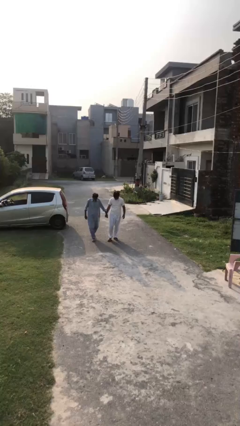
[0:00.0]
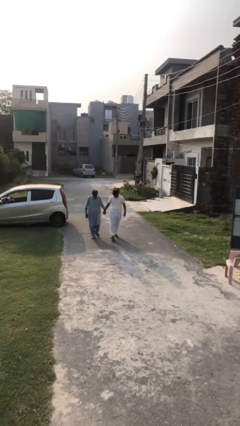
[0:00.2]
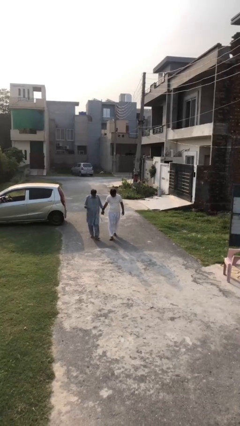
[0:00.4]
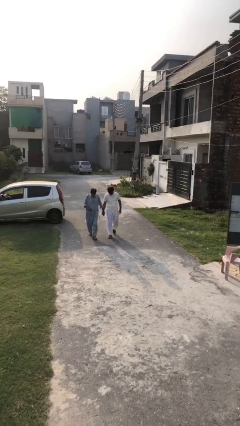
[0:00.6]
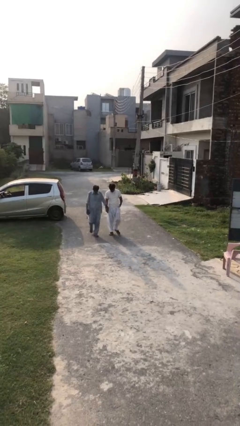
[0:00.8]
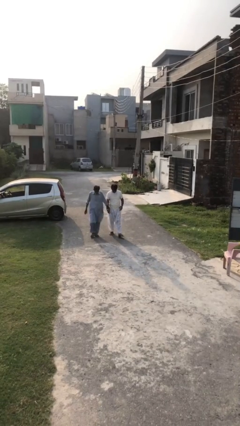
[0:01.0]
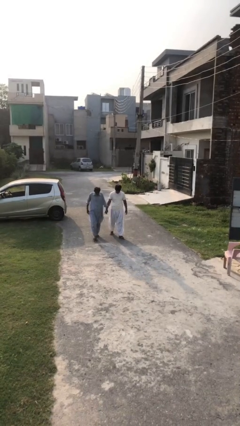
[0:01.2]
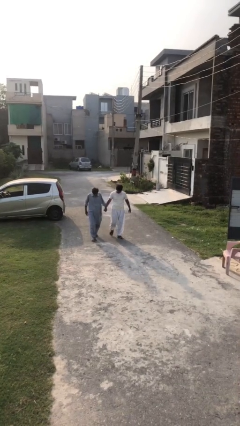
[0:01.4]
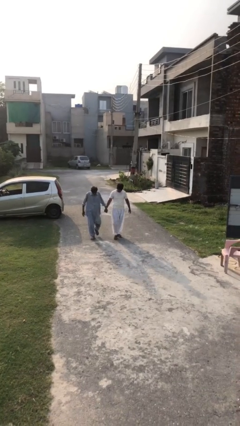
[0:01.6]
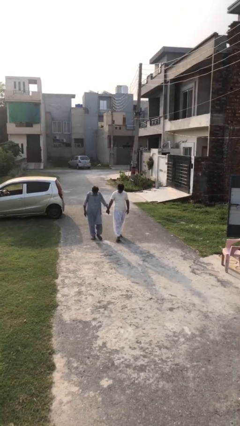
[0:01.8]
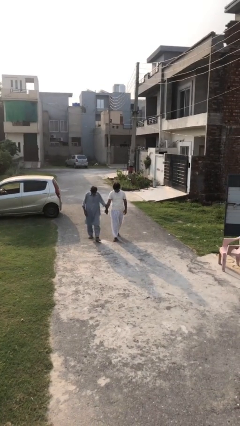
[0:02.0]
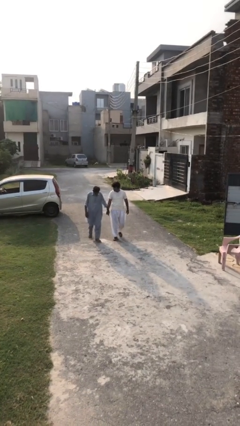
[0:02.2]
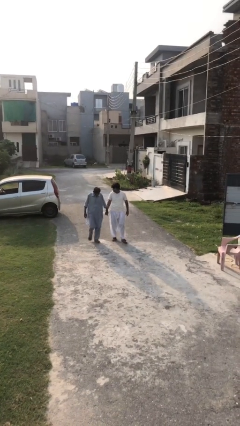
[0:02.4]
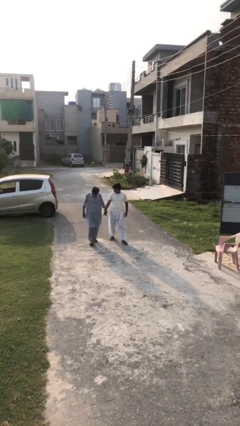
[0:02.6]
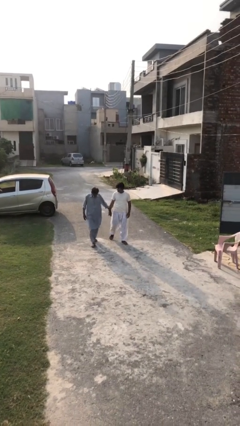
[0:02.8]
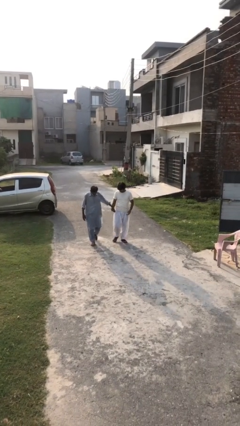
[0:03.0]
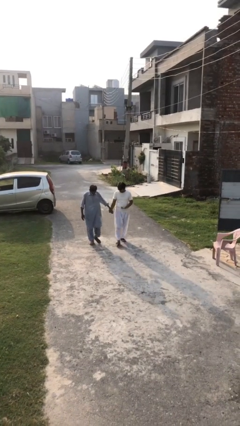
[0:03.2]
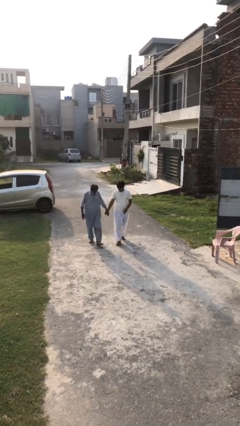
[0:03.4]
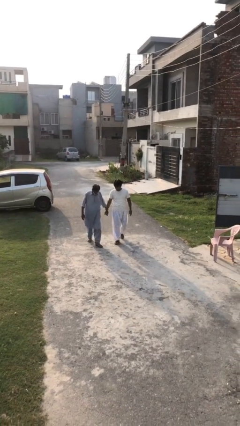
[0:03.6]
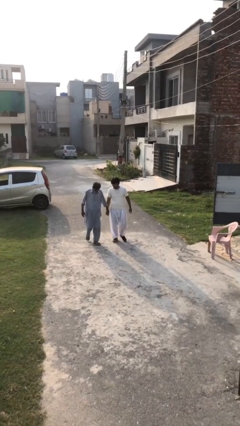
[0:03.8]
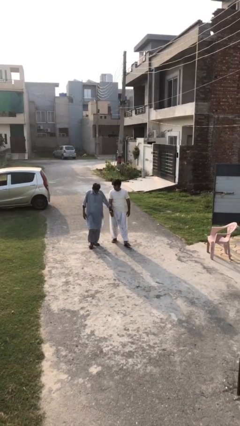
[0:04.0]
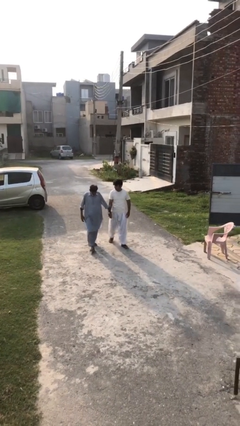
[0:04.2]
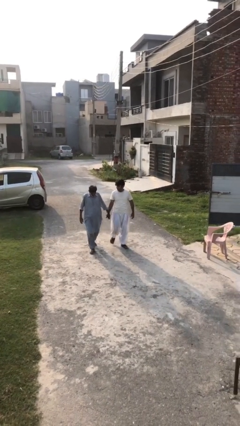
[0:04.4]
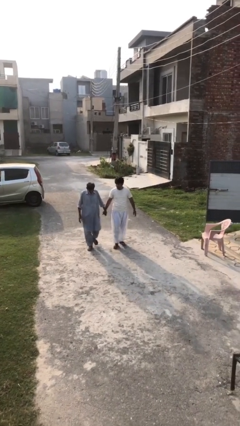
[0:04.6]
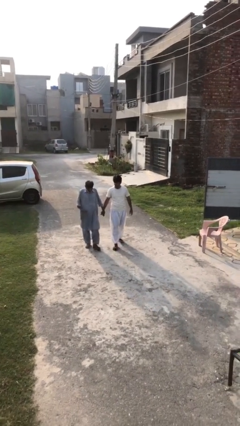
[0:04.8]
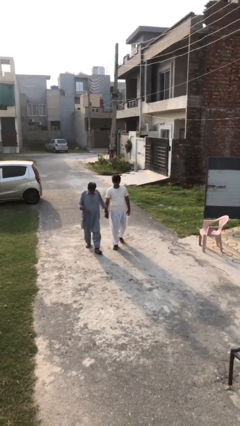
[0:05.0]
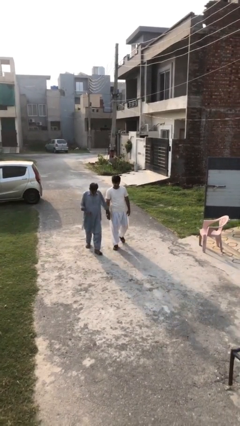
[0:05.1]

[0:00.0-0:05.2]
person holds hand

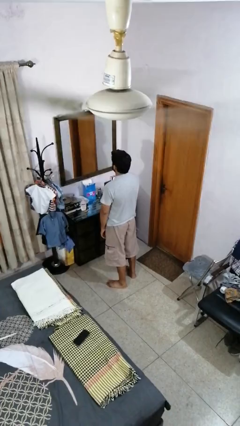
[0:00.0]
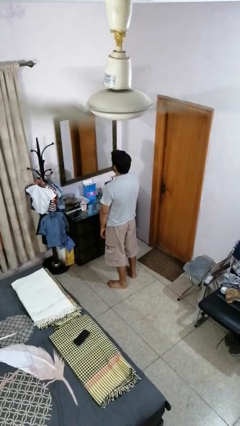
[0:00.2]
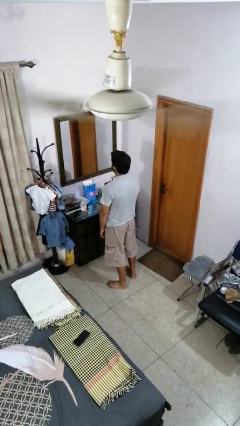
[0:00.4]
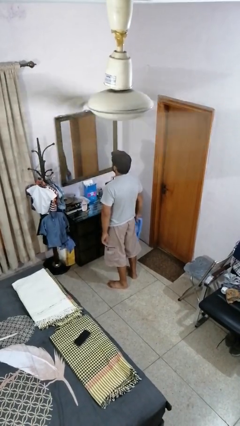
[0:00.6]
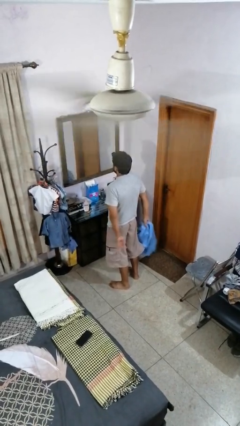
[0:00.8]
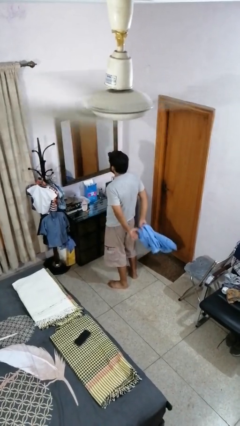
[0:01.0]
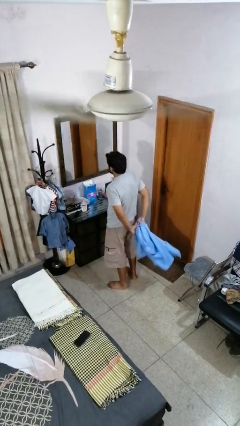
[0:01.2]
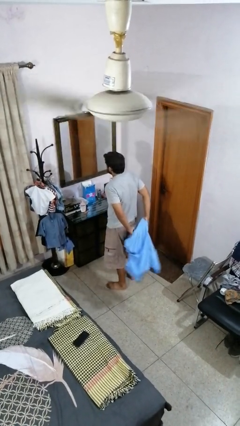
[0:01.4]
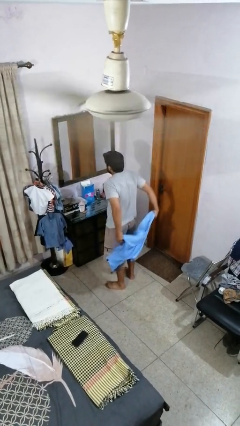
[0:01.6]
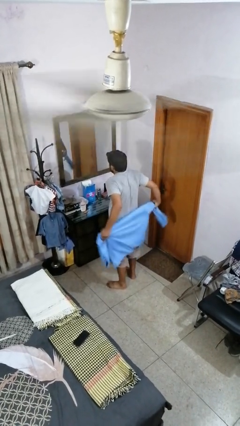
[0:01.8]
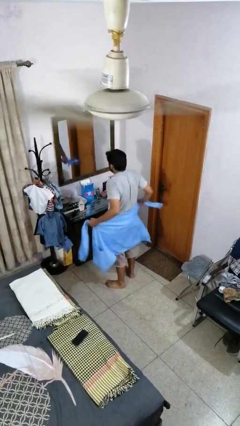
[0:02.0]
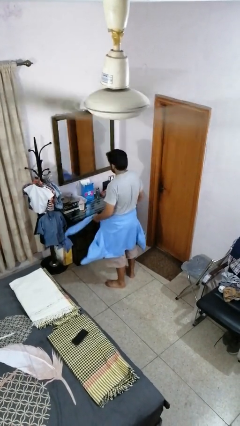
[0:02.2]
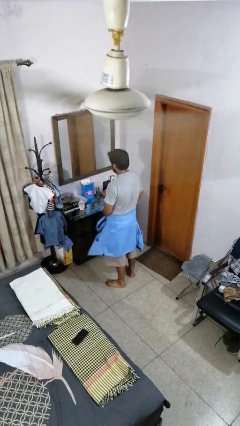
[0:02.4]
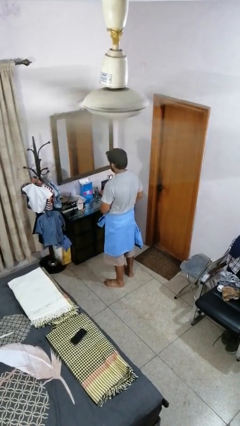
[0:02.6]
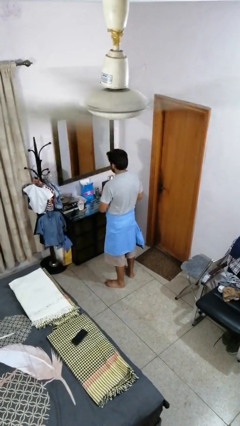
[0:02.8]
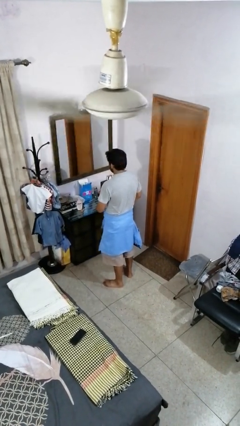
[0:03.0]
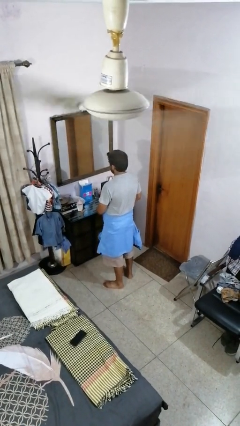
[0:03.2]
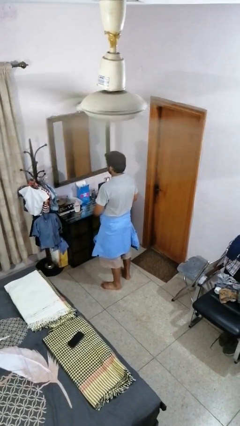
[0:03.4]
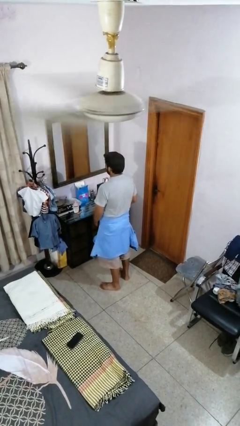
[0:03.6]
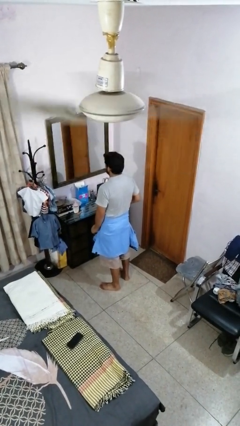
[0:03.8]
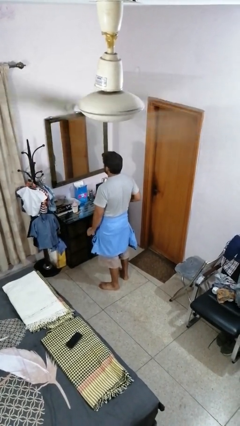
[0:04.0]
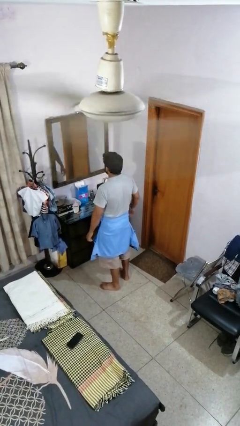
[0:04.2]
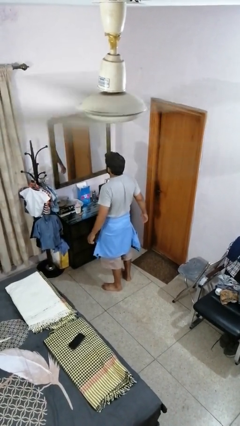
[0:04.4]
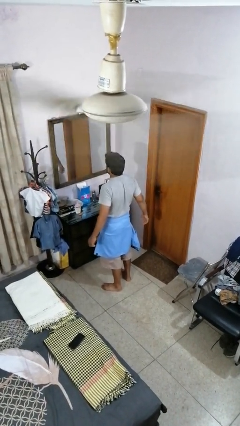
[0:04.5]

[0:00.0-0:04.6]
person ties jacket around waist

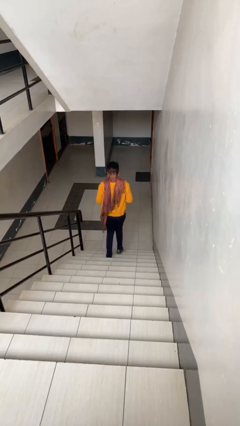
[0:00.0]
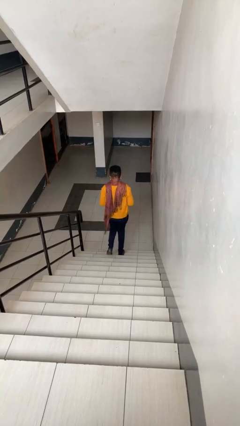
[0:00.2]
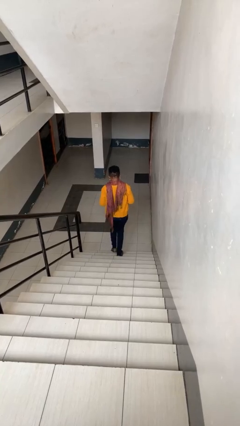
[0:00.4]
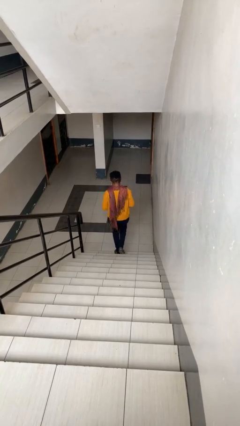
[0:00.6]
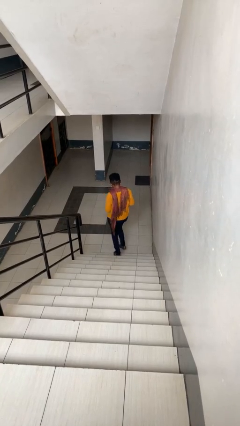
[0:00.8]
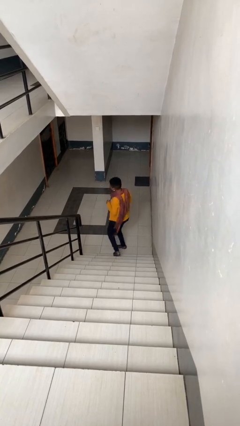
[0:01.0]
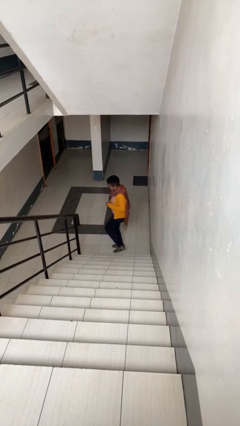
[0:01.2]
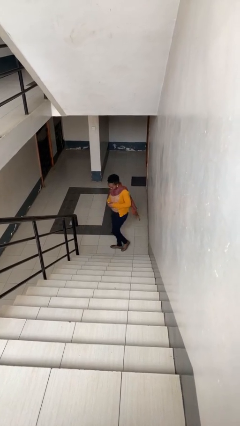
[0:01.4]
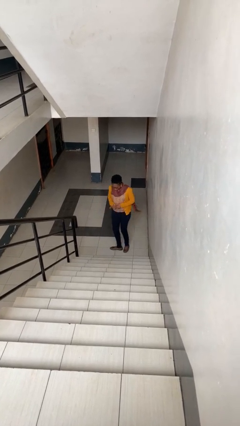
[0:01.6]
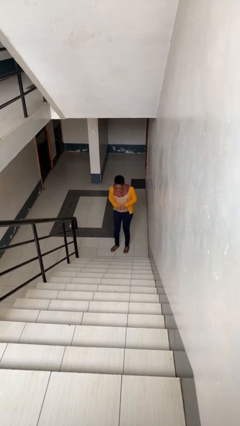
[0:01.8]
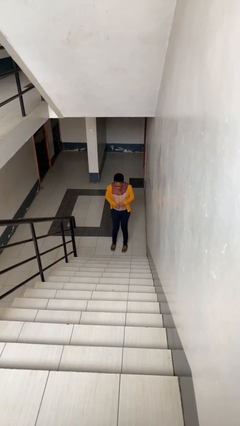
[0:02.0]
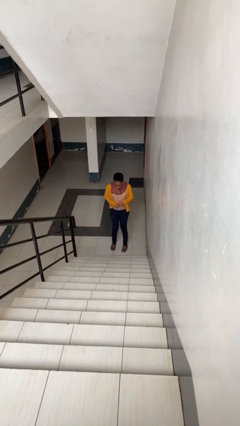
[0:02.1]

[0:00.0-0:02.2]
person climbs down stairs

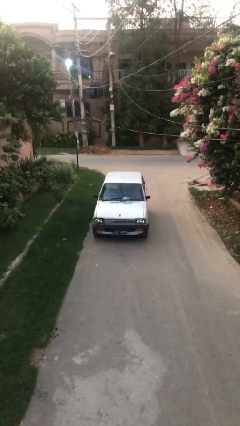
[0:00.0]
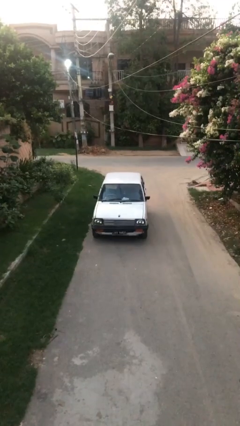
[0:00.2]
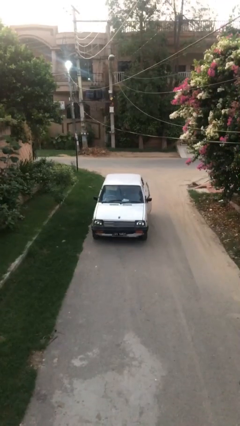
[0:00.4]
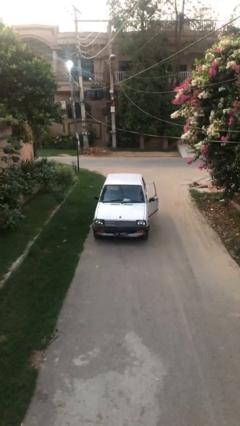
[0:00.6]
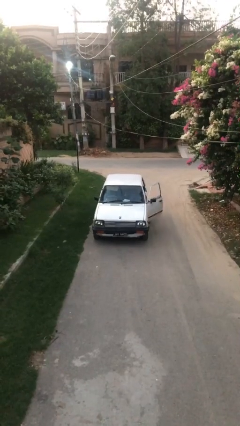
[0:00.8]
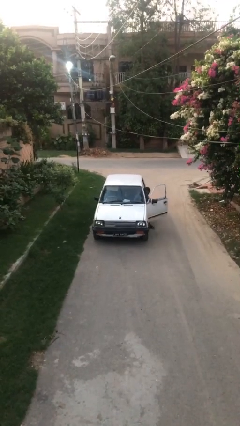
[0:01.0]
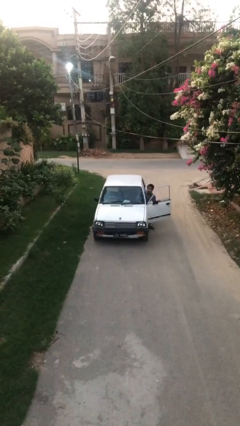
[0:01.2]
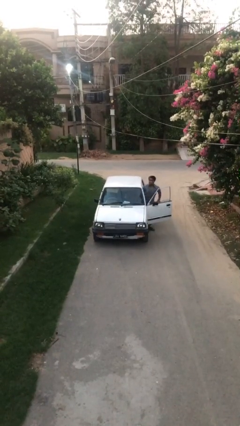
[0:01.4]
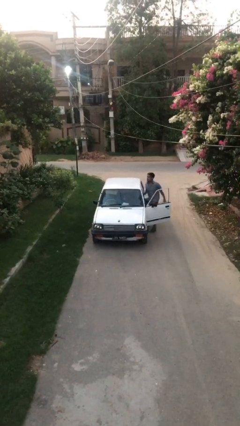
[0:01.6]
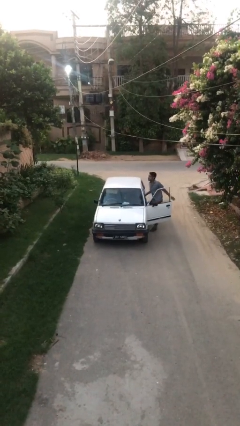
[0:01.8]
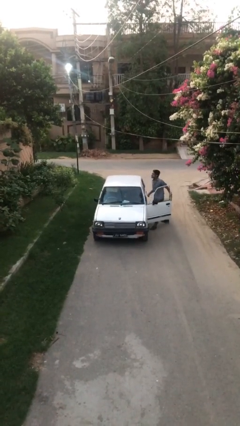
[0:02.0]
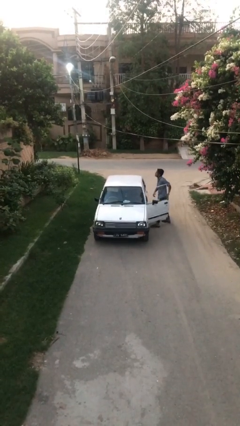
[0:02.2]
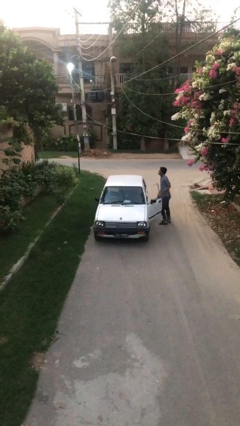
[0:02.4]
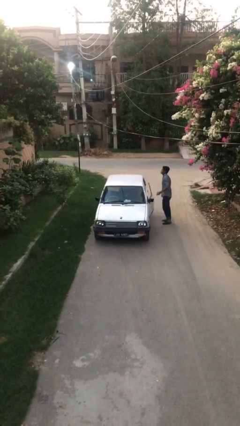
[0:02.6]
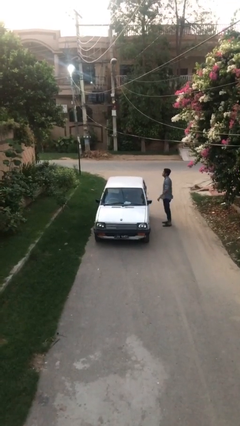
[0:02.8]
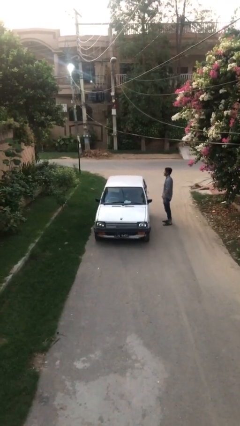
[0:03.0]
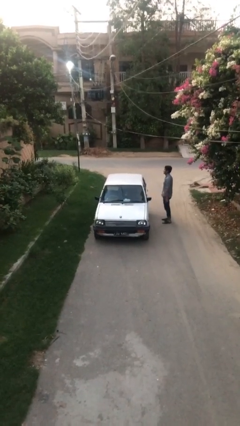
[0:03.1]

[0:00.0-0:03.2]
car drops off person

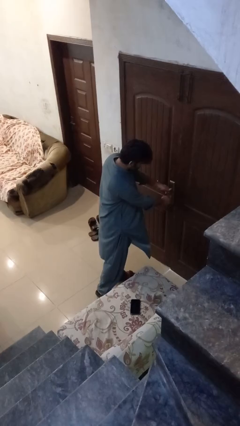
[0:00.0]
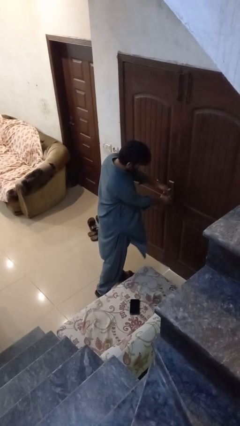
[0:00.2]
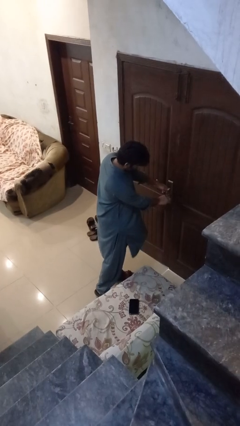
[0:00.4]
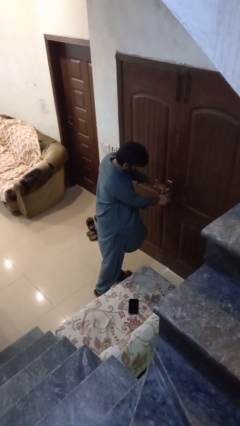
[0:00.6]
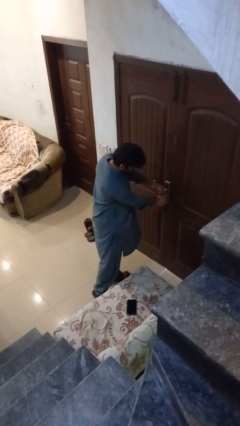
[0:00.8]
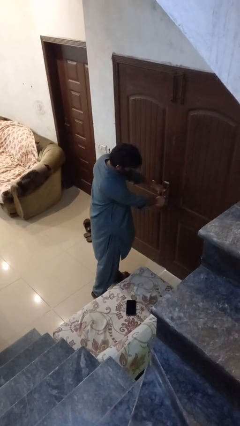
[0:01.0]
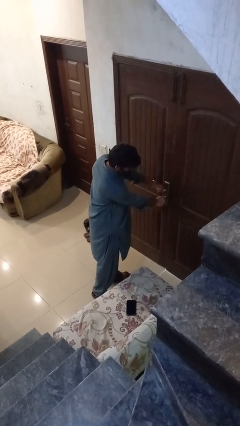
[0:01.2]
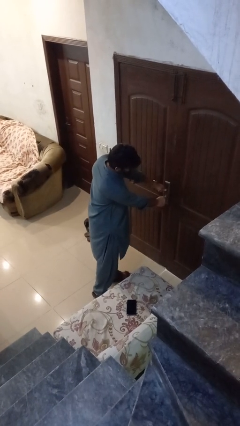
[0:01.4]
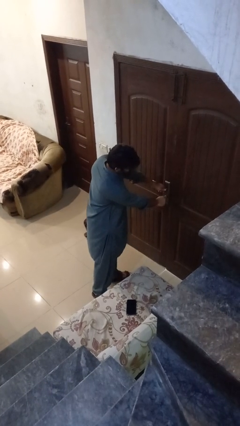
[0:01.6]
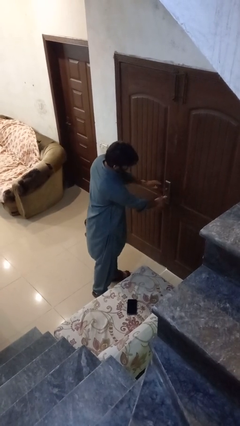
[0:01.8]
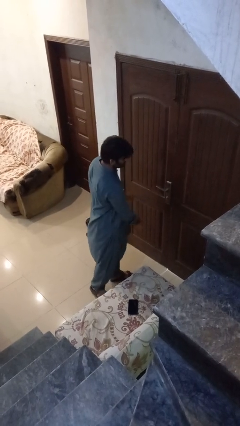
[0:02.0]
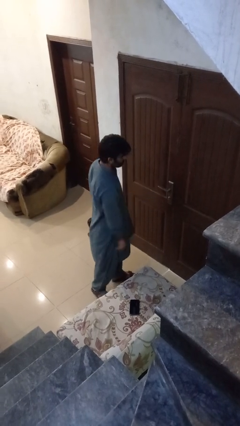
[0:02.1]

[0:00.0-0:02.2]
person locks door with keys

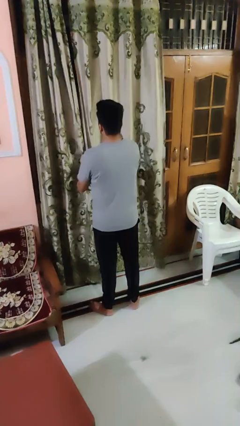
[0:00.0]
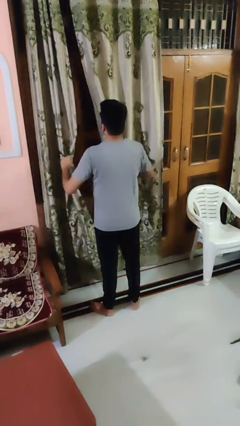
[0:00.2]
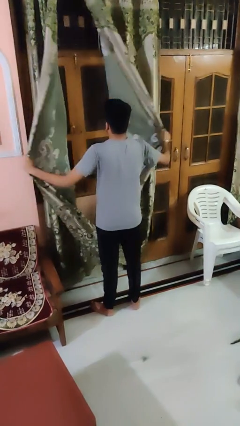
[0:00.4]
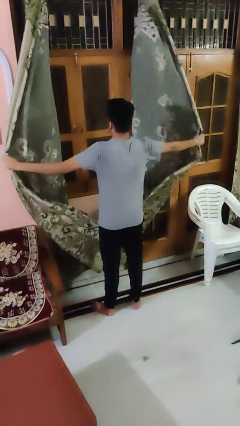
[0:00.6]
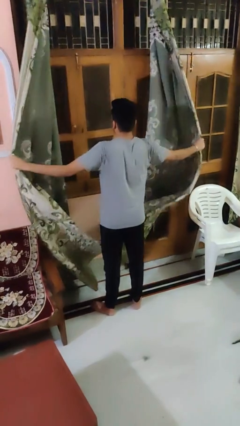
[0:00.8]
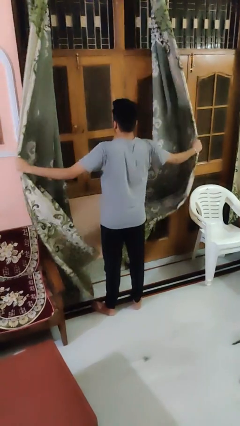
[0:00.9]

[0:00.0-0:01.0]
person opens curtains
